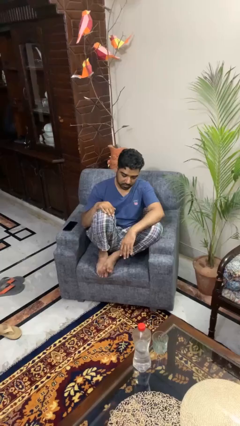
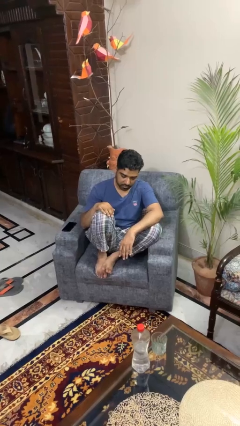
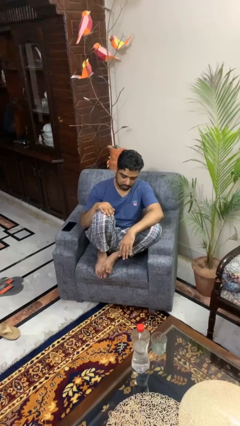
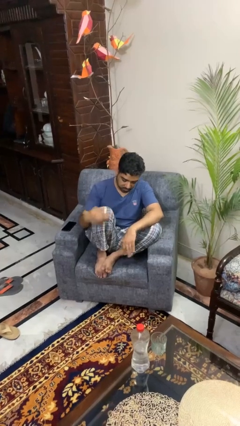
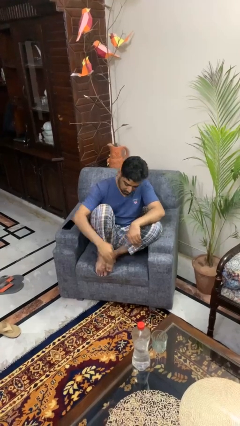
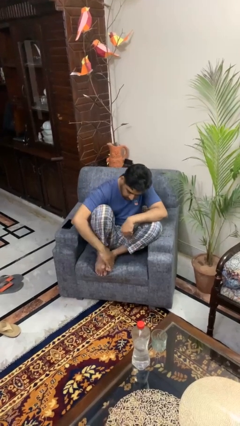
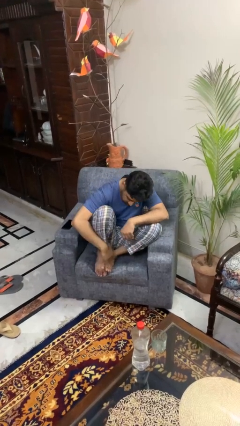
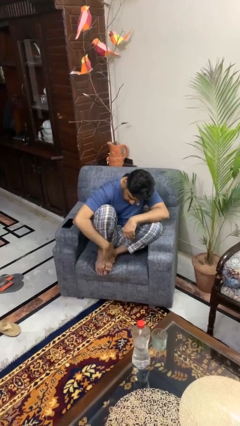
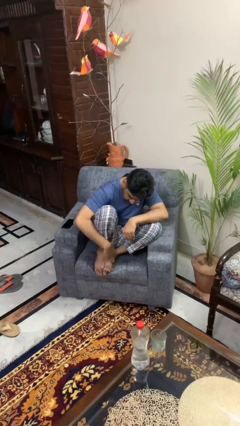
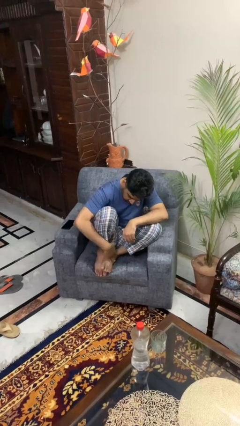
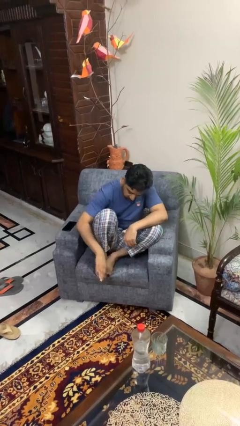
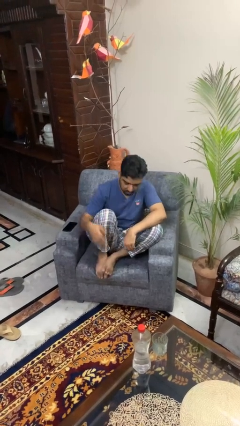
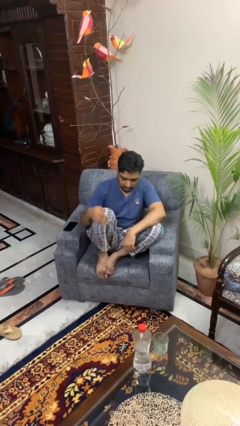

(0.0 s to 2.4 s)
person rubs foot

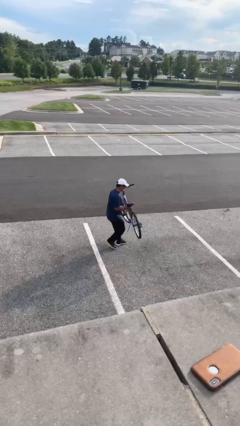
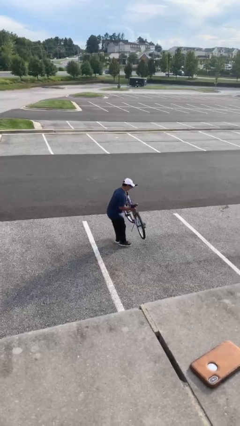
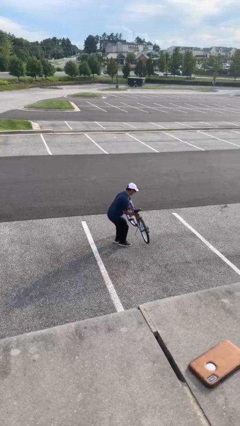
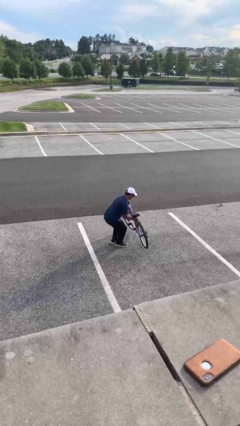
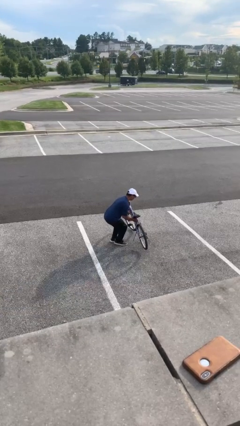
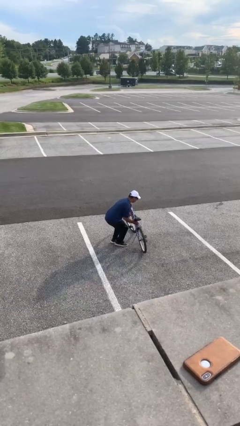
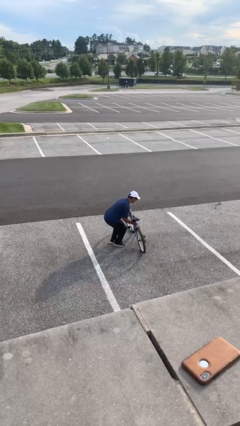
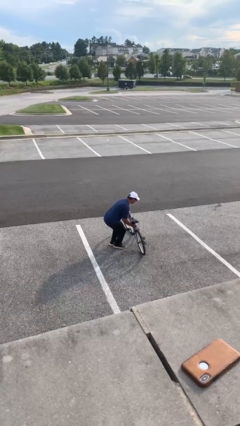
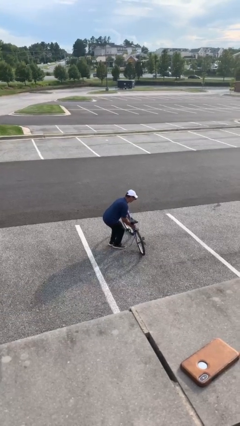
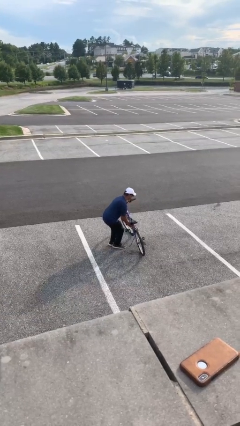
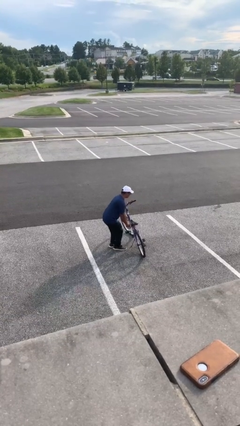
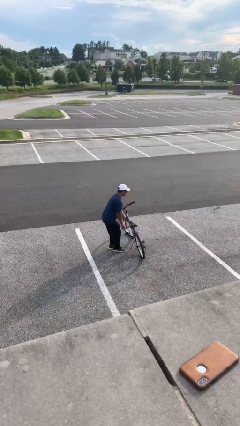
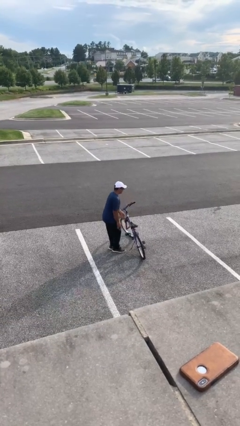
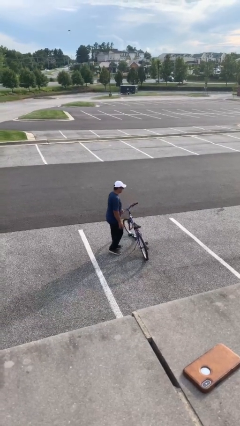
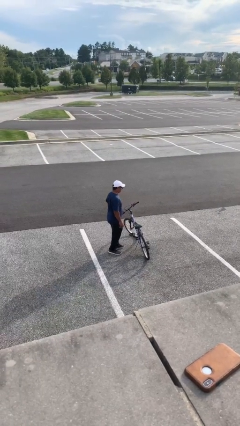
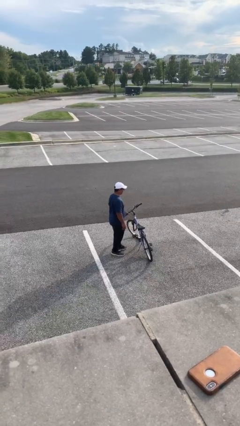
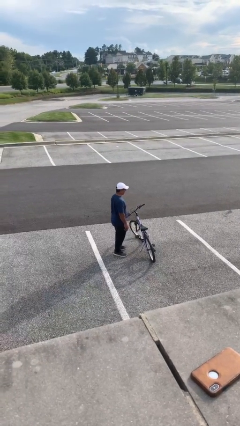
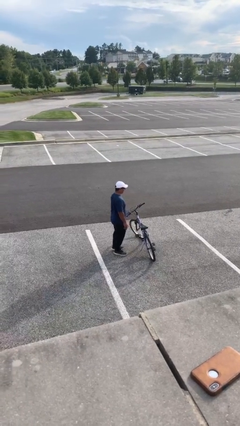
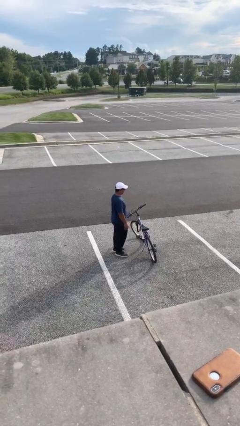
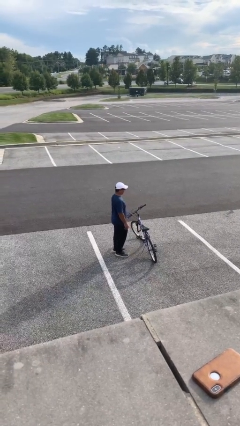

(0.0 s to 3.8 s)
person puts down object on floor

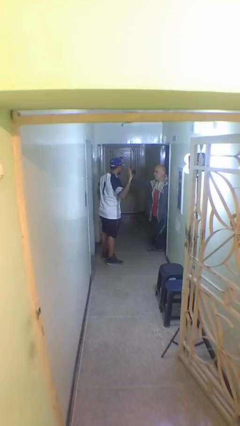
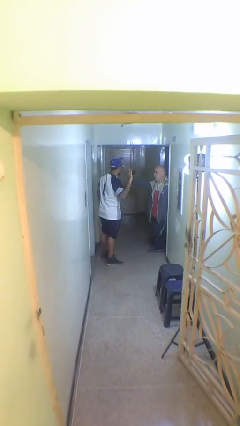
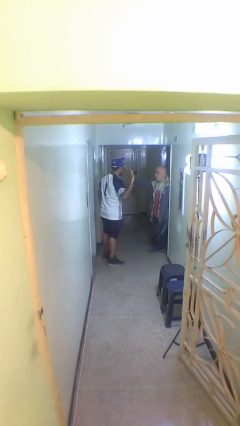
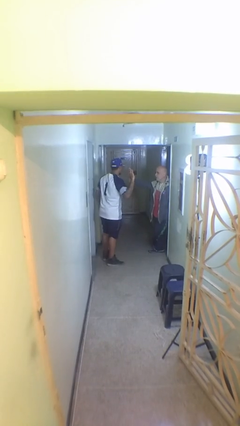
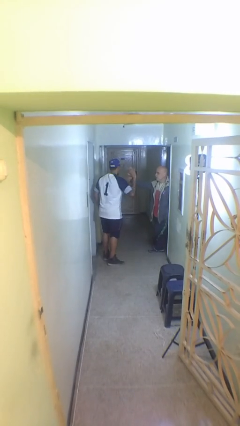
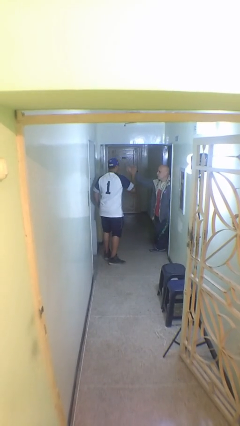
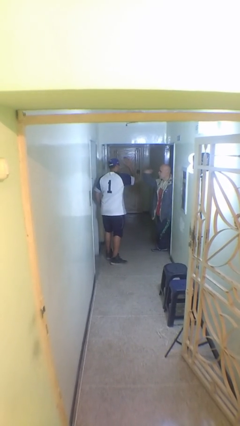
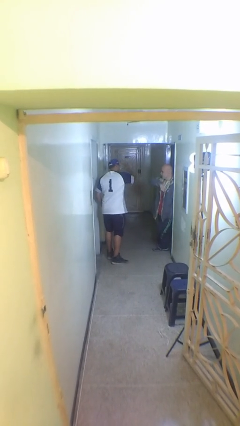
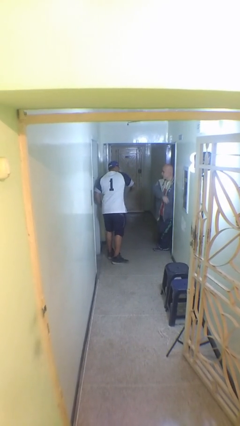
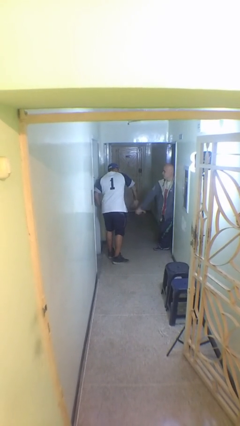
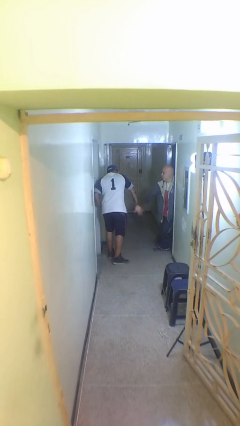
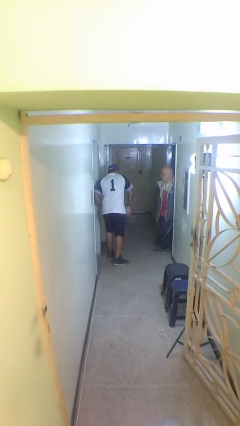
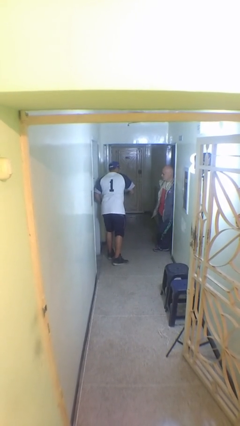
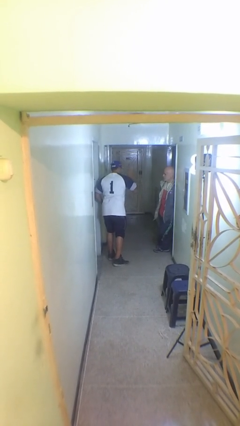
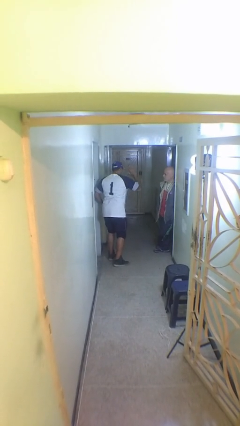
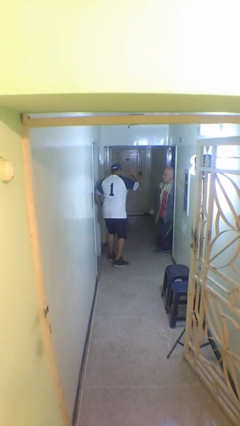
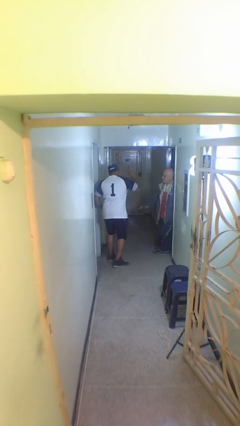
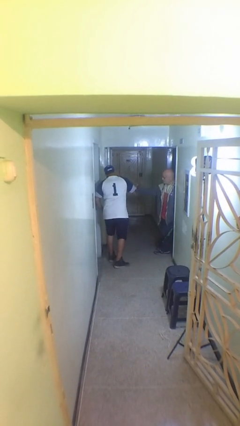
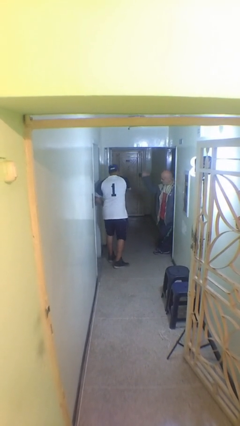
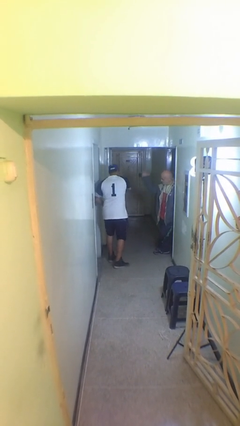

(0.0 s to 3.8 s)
person highfives hand

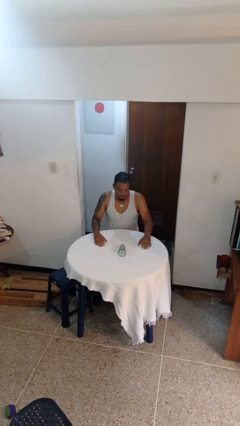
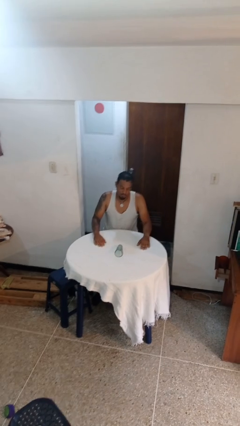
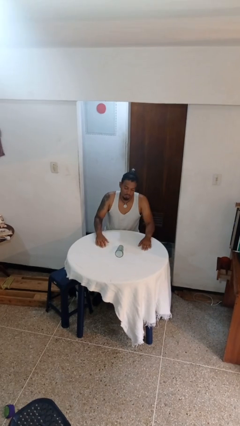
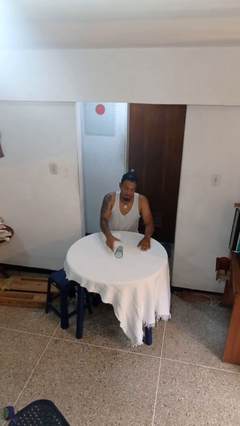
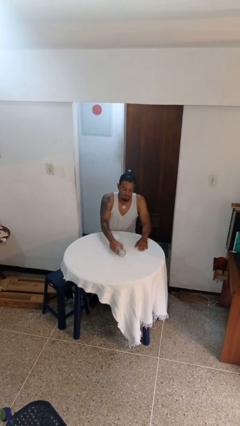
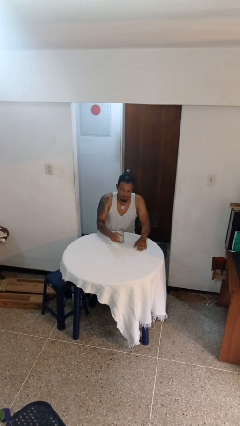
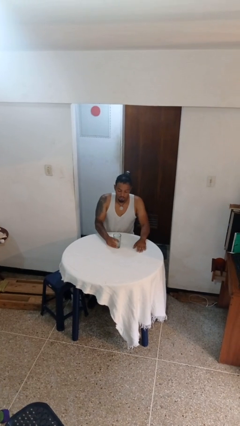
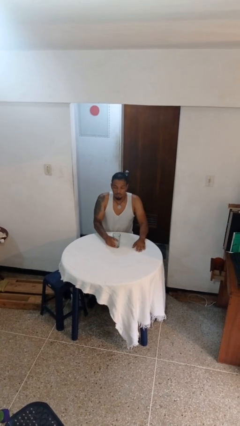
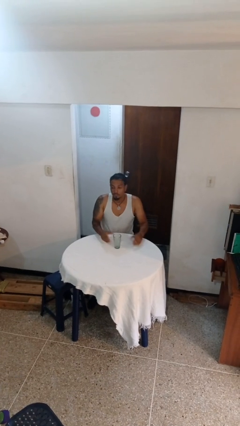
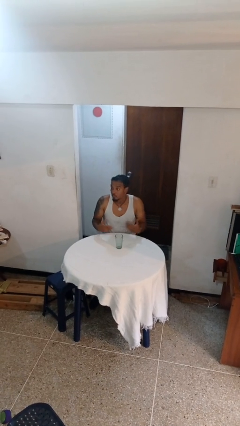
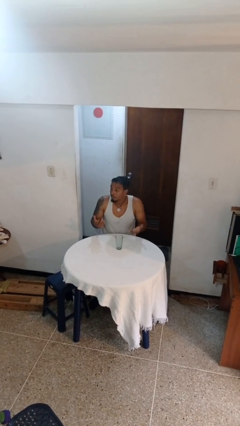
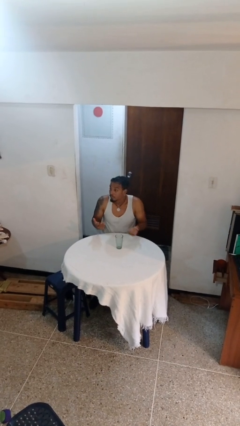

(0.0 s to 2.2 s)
person sets upright glass

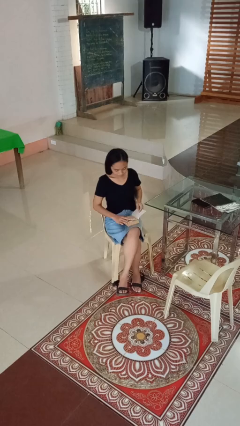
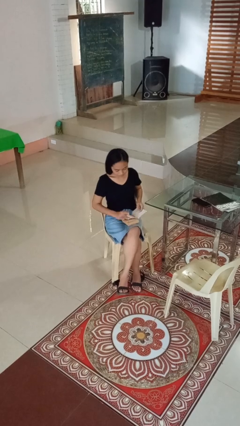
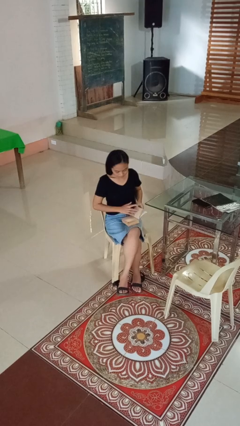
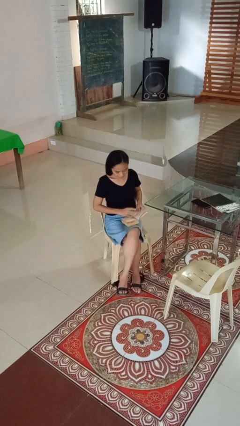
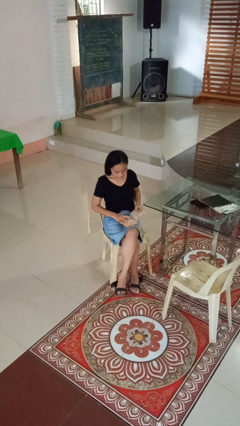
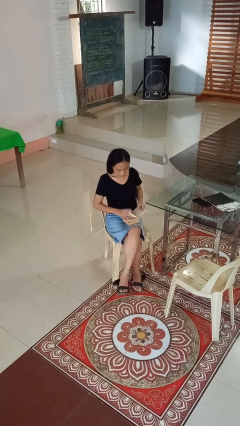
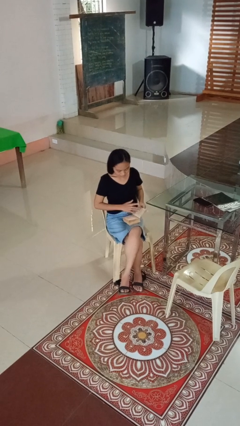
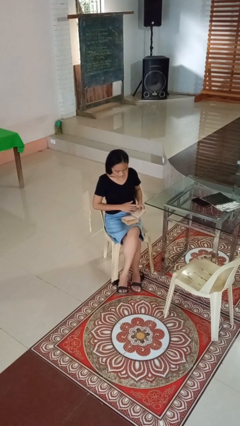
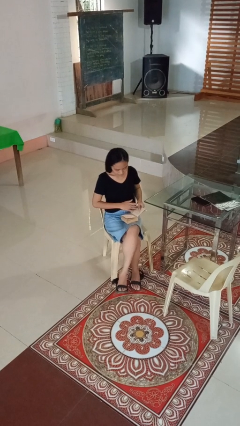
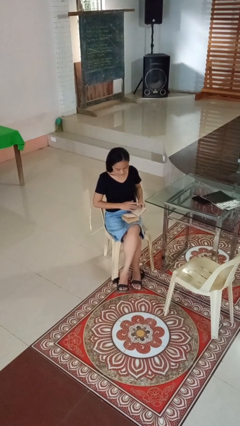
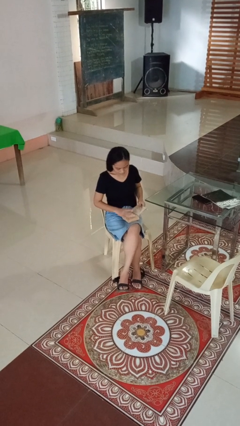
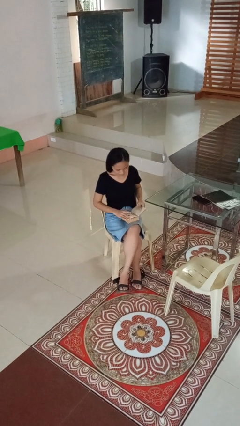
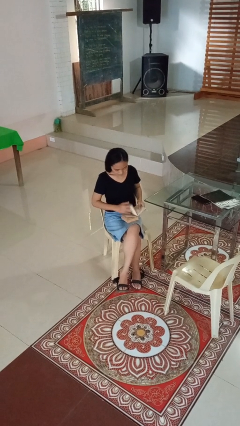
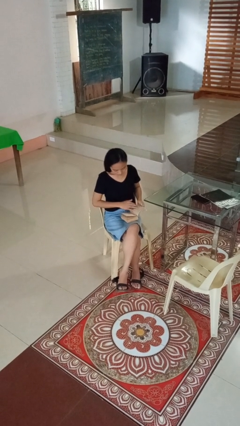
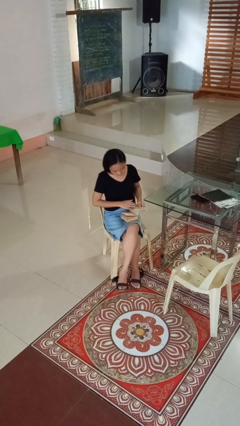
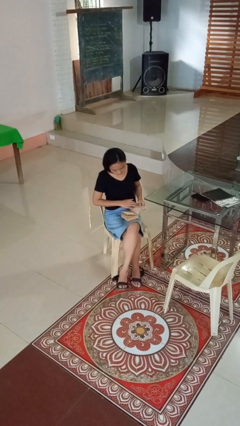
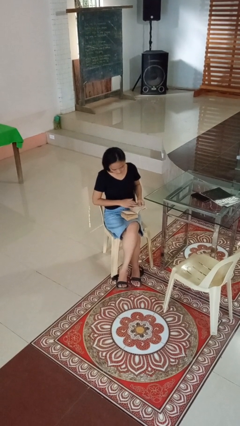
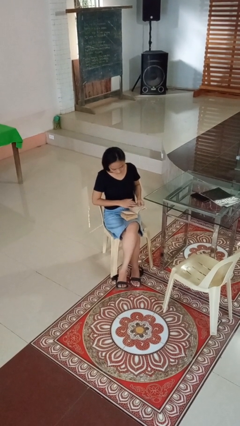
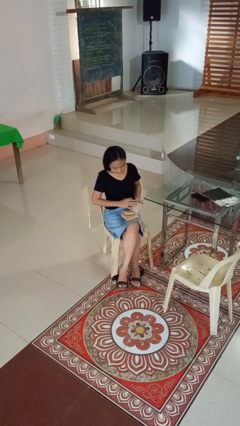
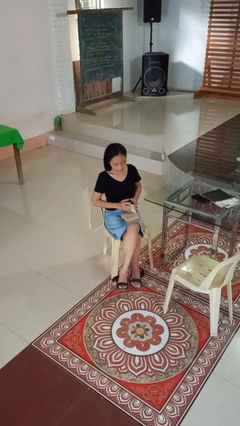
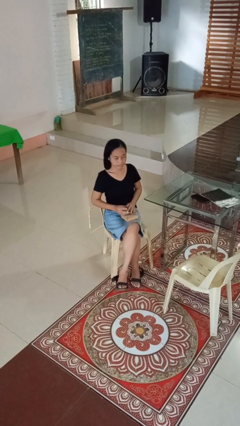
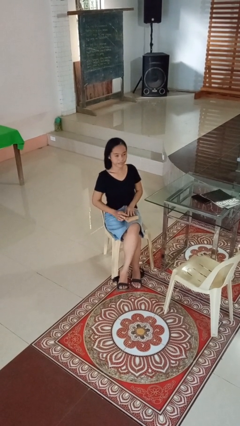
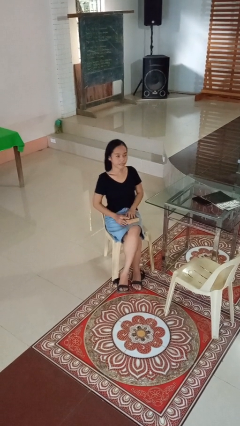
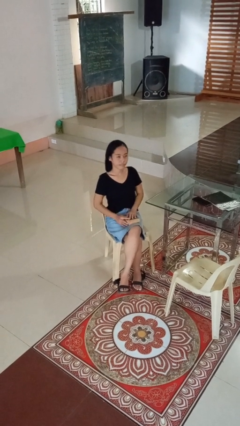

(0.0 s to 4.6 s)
person reads book

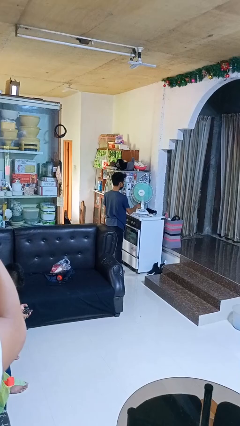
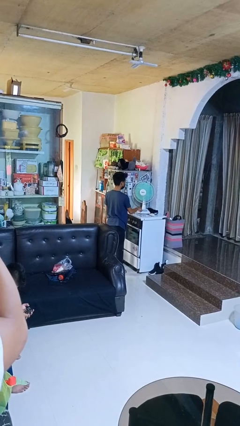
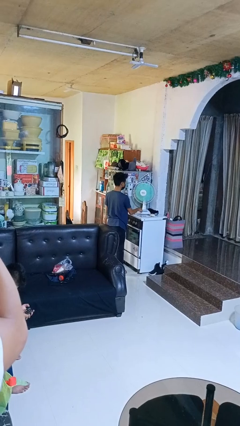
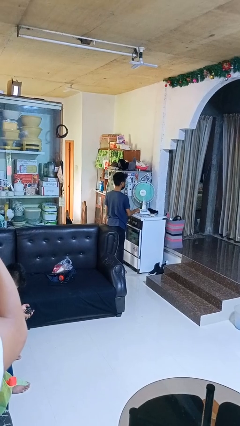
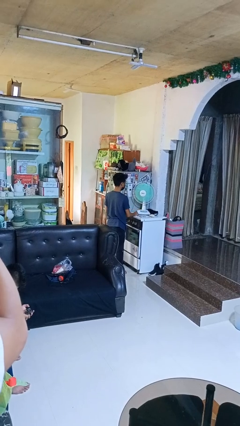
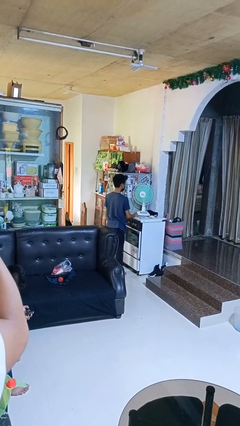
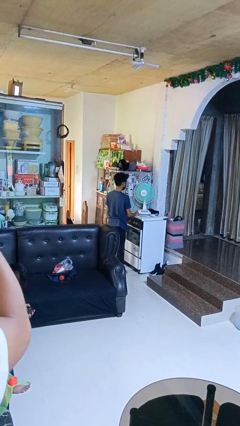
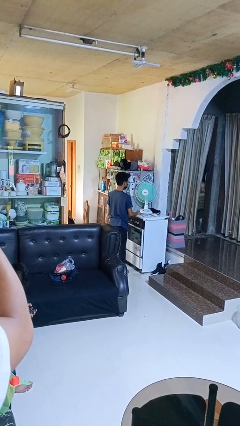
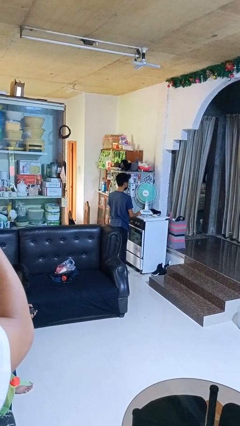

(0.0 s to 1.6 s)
person turns off fan
